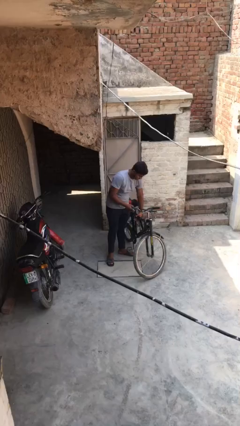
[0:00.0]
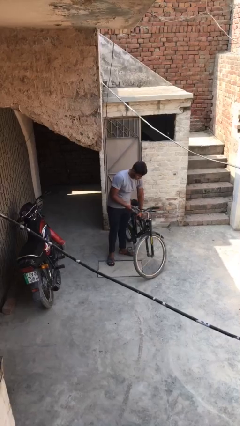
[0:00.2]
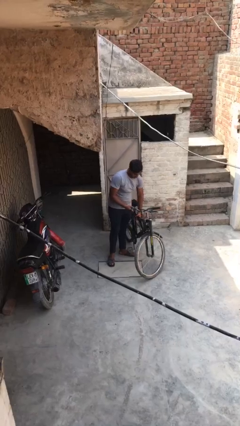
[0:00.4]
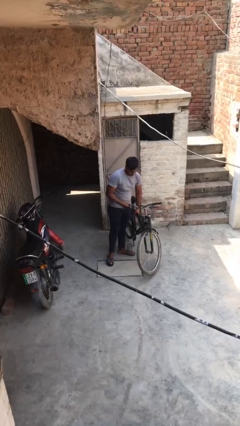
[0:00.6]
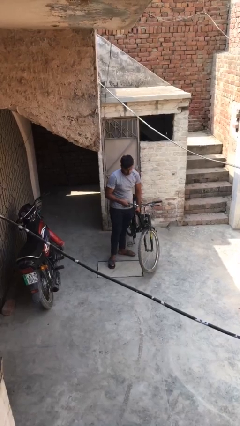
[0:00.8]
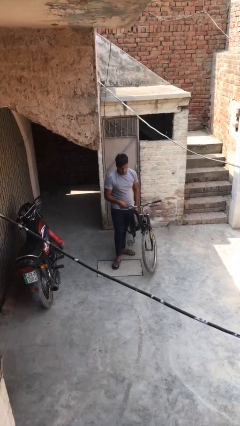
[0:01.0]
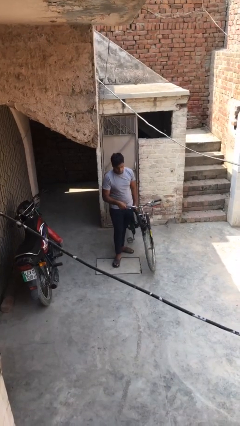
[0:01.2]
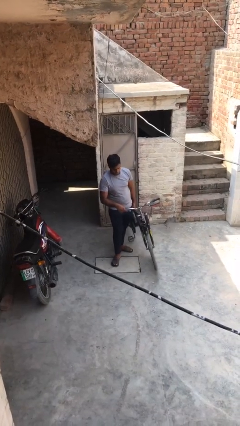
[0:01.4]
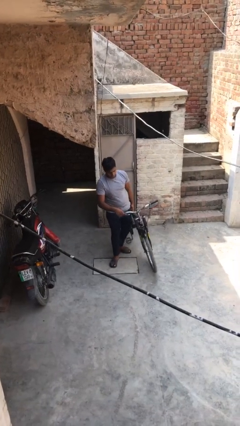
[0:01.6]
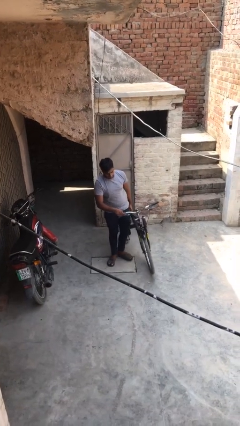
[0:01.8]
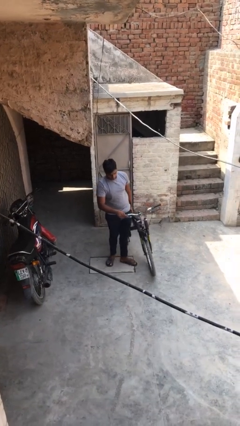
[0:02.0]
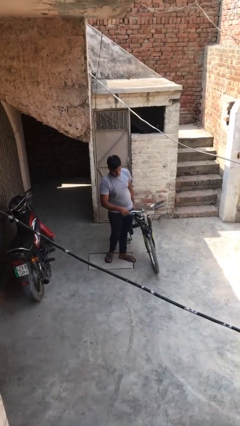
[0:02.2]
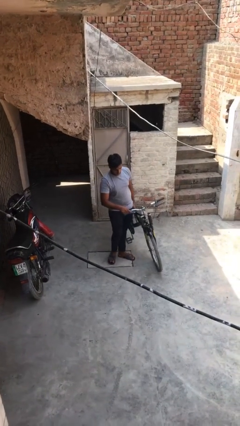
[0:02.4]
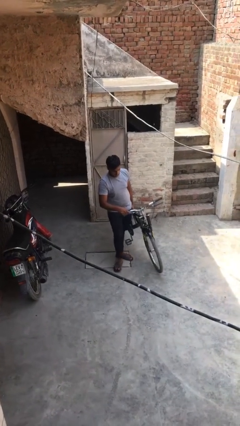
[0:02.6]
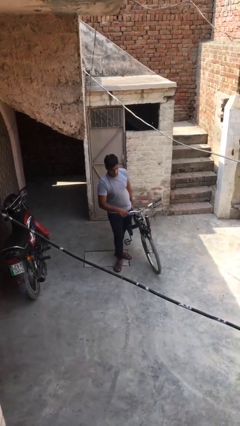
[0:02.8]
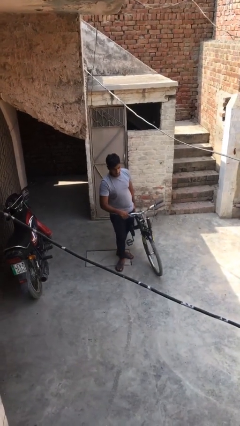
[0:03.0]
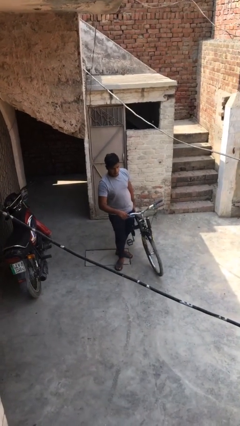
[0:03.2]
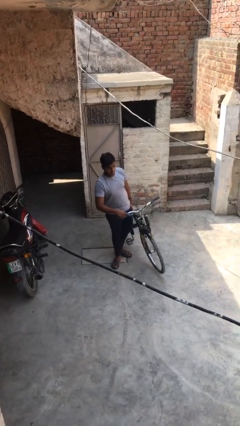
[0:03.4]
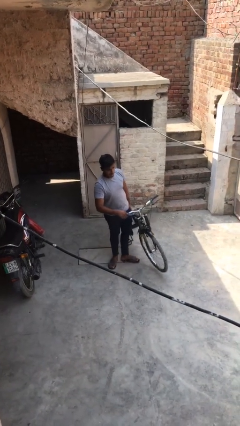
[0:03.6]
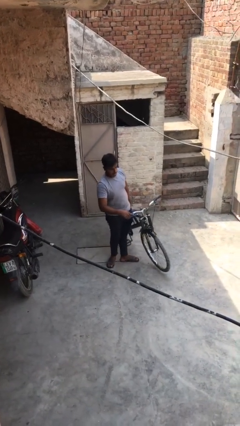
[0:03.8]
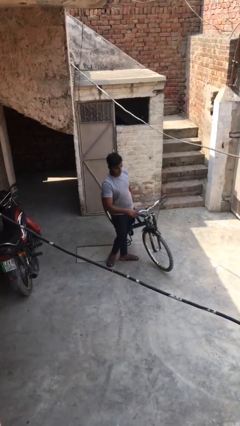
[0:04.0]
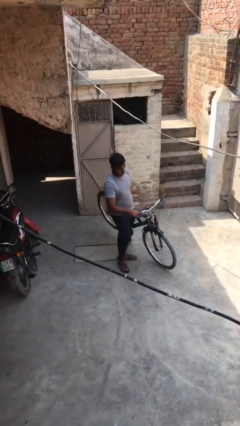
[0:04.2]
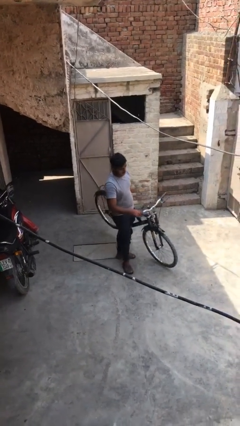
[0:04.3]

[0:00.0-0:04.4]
person picks up object from floor

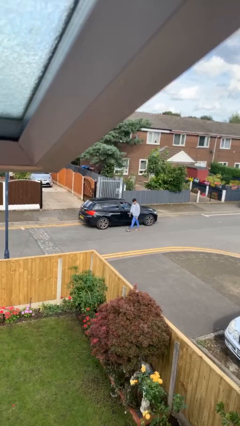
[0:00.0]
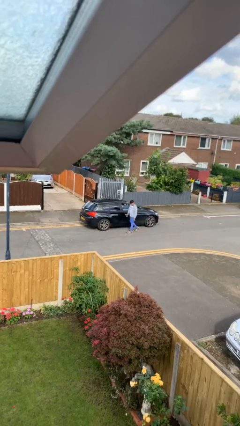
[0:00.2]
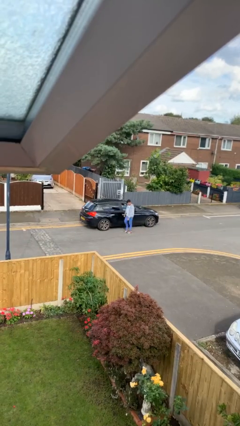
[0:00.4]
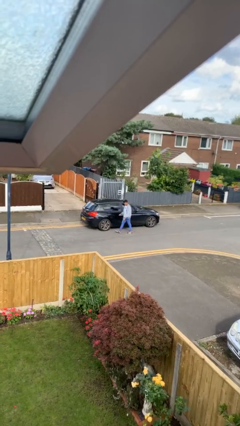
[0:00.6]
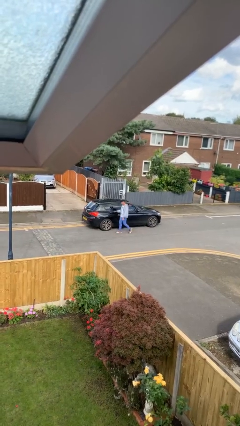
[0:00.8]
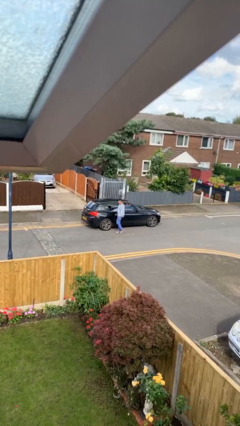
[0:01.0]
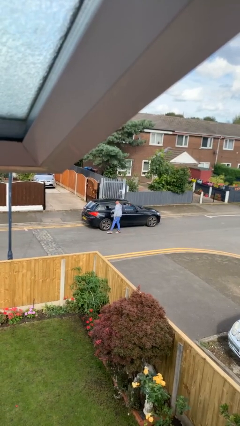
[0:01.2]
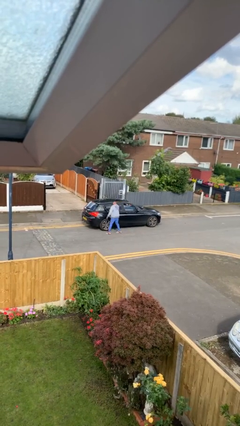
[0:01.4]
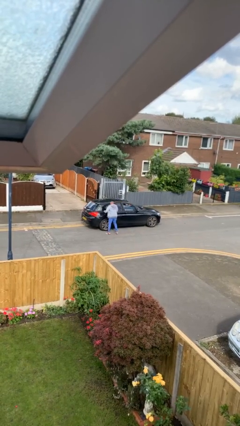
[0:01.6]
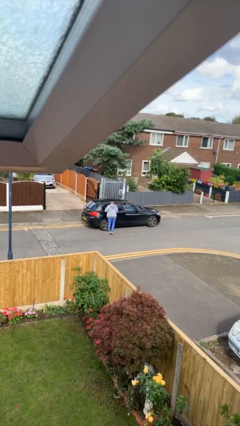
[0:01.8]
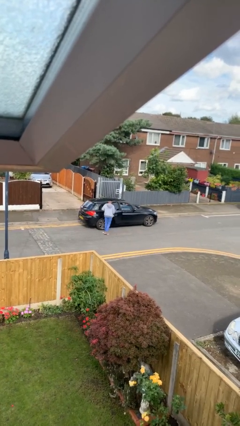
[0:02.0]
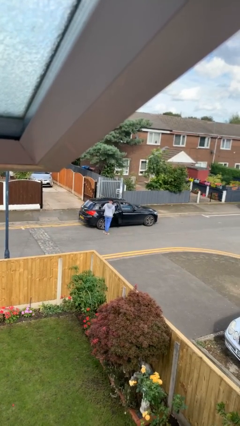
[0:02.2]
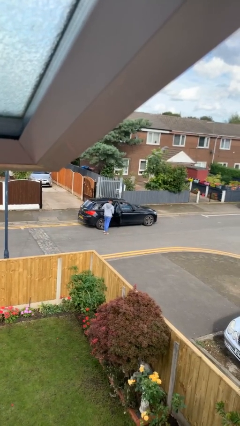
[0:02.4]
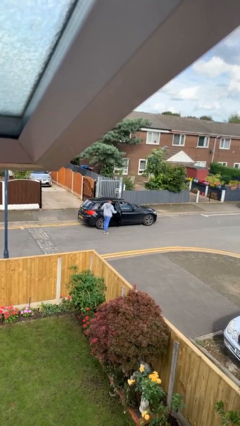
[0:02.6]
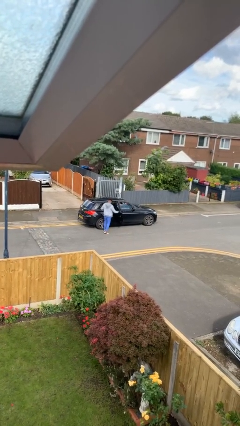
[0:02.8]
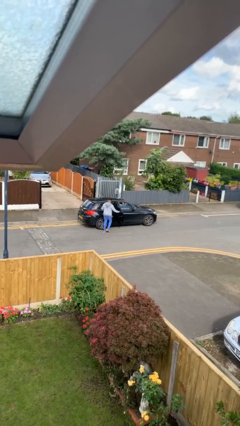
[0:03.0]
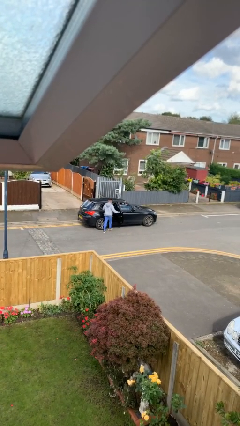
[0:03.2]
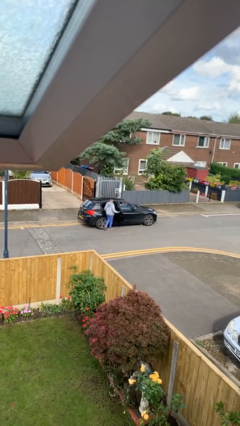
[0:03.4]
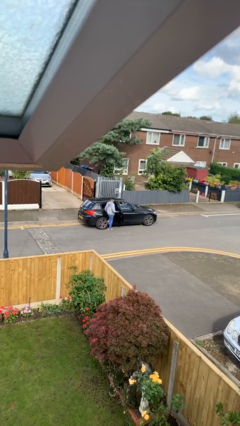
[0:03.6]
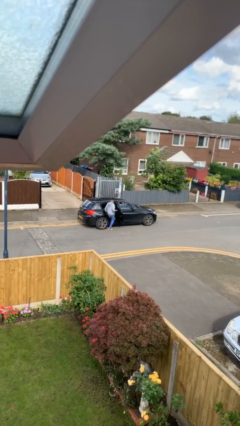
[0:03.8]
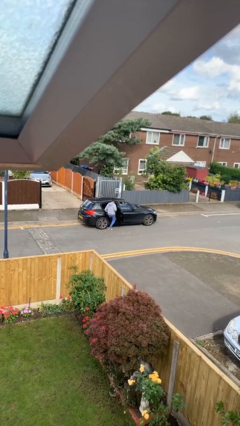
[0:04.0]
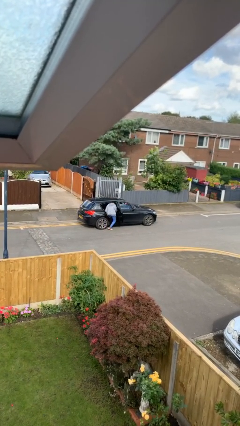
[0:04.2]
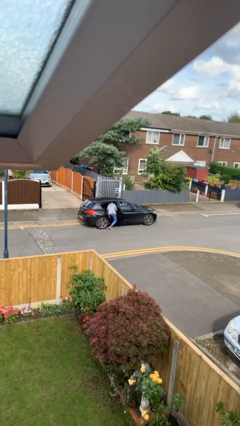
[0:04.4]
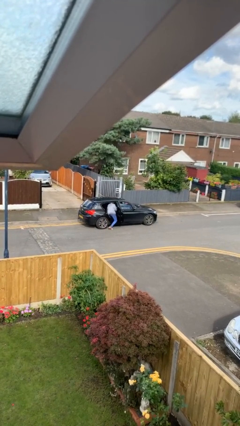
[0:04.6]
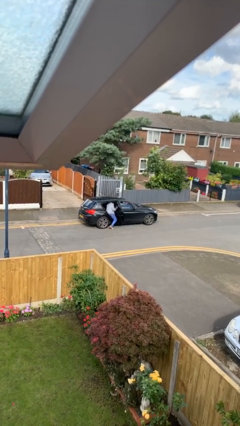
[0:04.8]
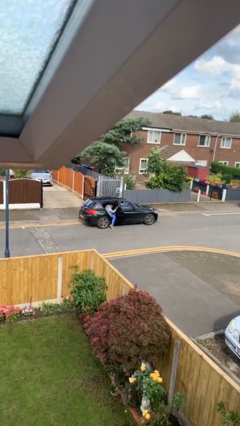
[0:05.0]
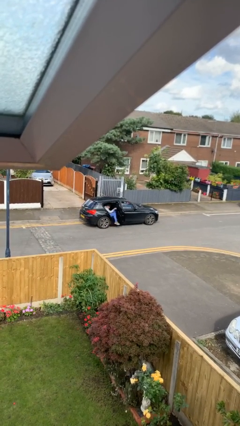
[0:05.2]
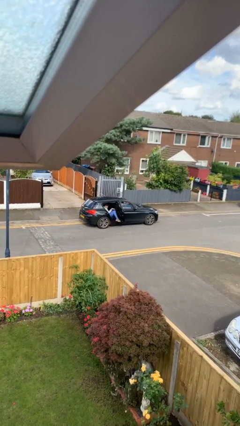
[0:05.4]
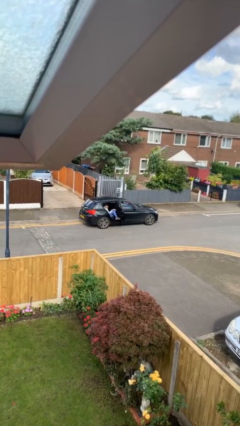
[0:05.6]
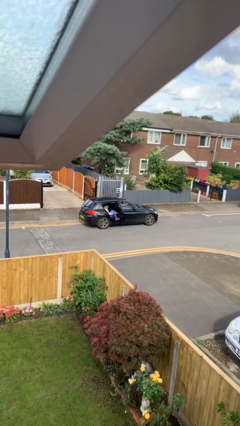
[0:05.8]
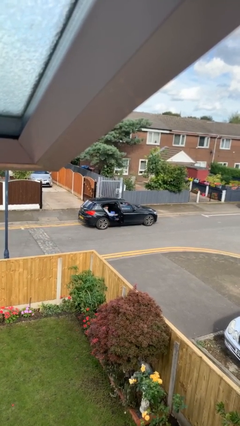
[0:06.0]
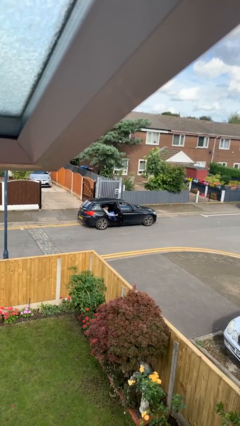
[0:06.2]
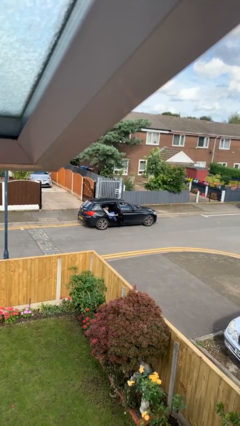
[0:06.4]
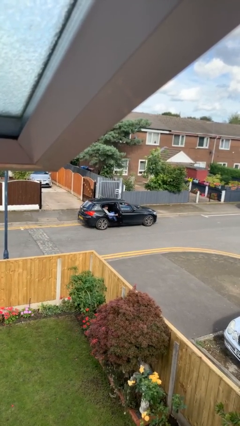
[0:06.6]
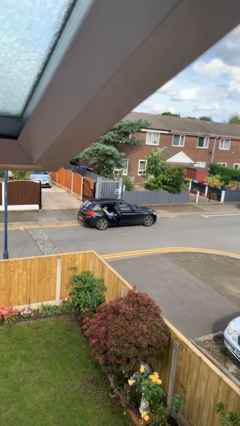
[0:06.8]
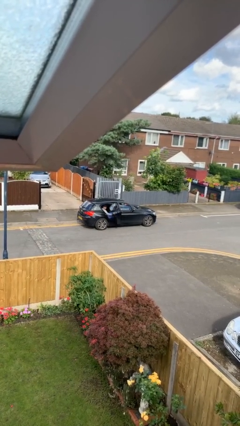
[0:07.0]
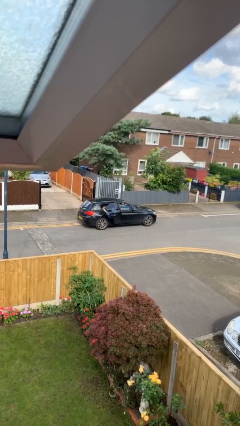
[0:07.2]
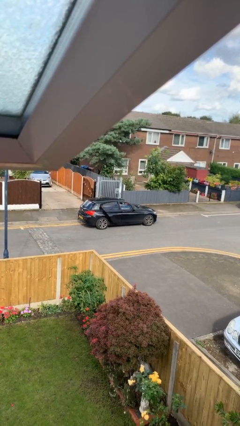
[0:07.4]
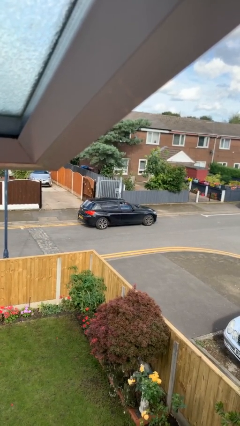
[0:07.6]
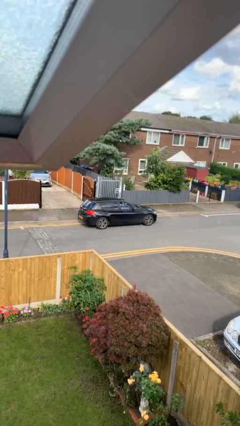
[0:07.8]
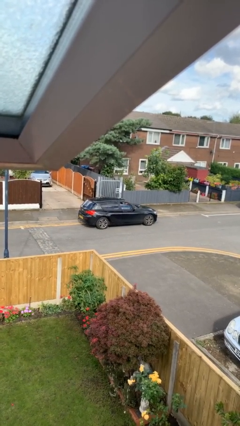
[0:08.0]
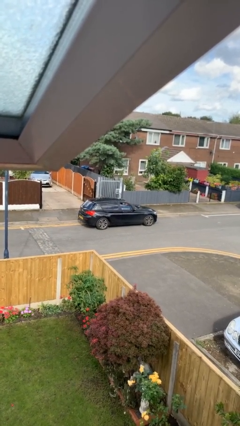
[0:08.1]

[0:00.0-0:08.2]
car picks up person

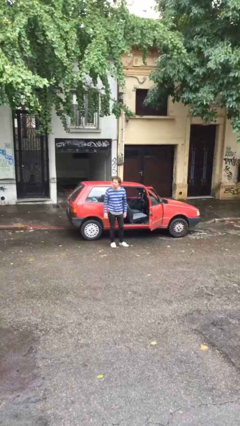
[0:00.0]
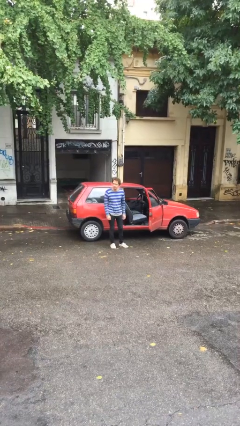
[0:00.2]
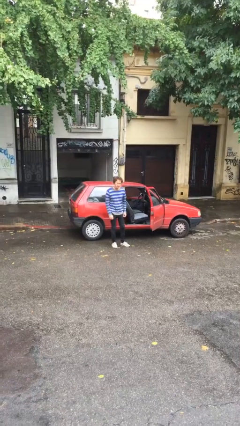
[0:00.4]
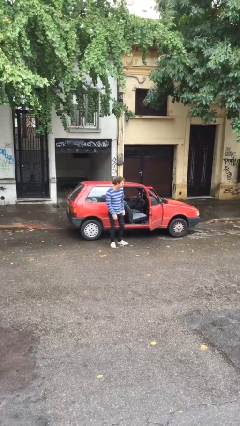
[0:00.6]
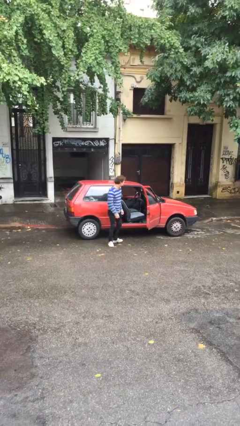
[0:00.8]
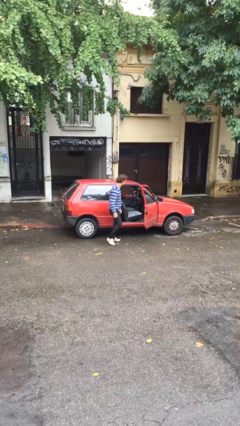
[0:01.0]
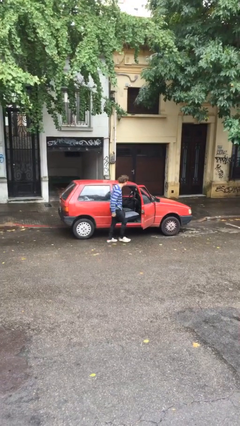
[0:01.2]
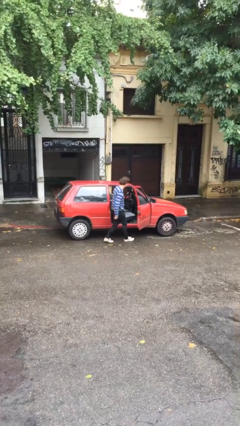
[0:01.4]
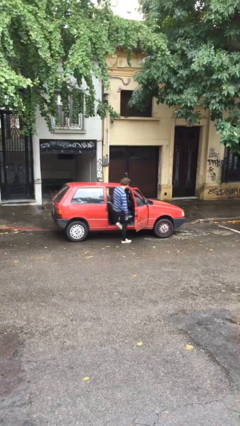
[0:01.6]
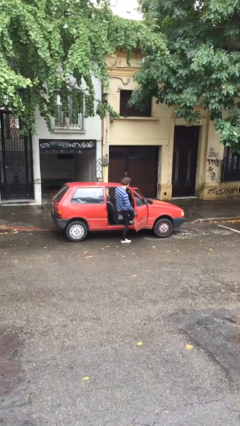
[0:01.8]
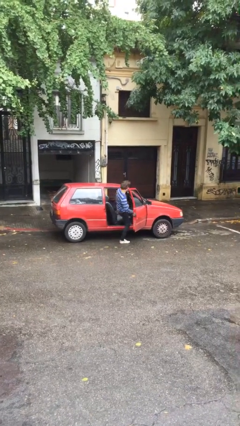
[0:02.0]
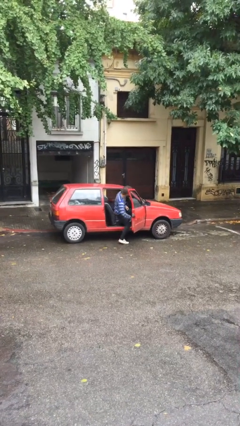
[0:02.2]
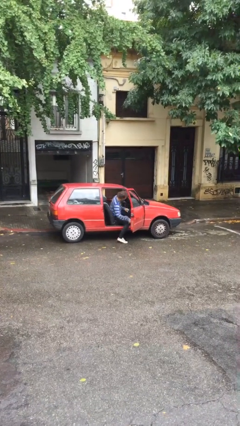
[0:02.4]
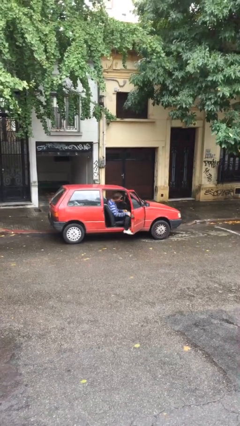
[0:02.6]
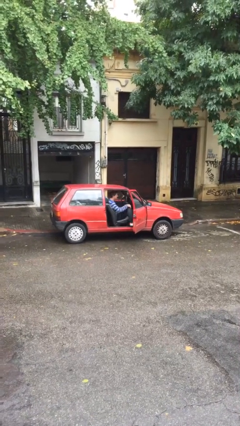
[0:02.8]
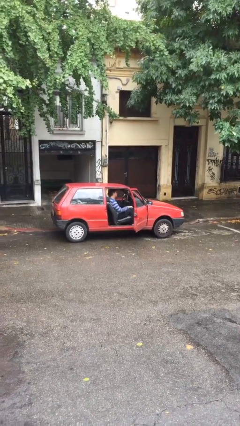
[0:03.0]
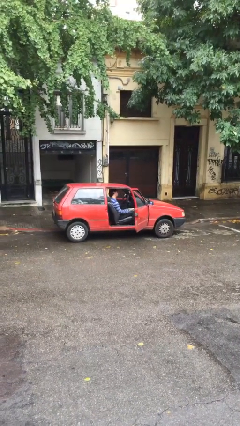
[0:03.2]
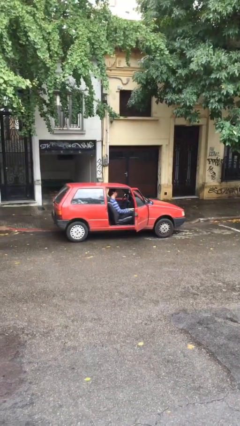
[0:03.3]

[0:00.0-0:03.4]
person enters car

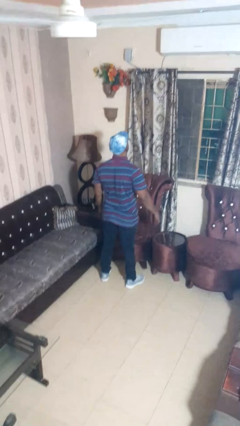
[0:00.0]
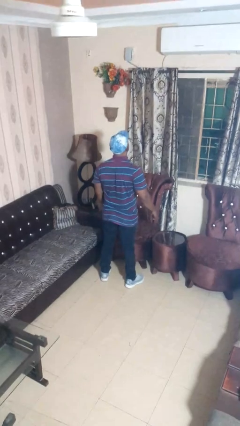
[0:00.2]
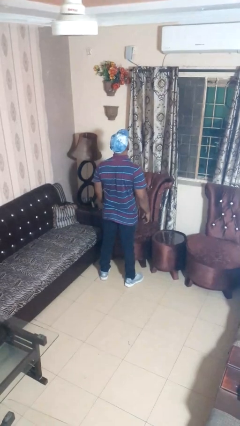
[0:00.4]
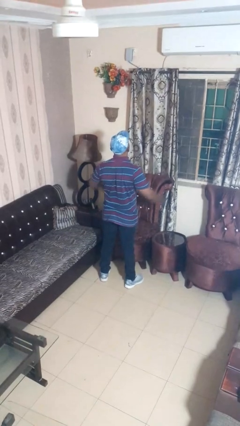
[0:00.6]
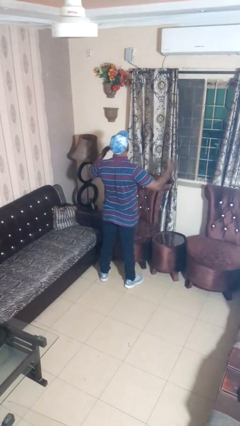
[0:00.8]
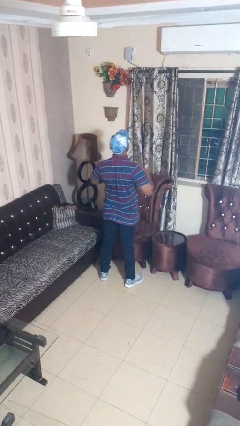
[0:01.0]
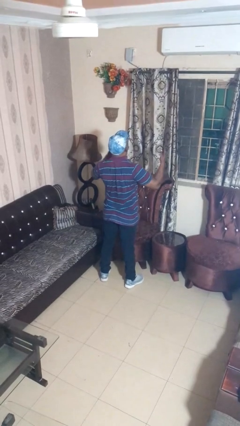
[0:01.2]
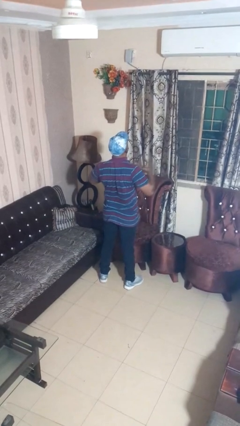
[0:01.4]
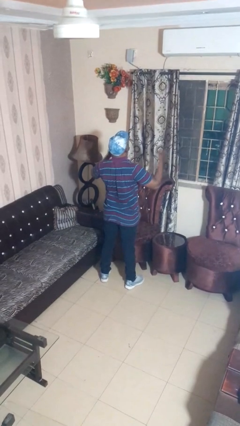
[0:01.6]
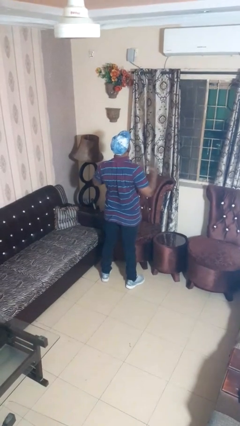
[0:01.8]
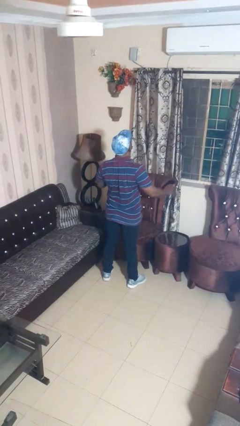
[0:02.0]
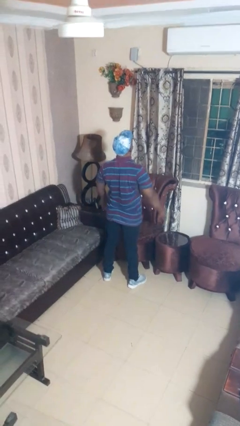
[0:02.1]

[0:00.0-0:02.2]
person drums on chest
